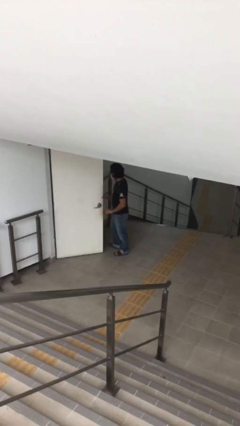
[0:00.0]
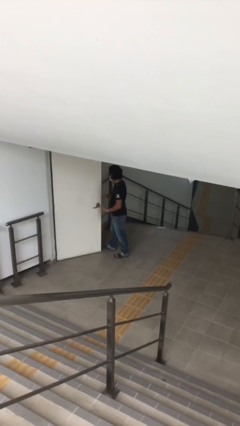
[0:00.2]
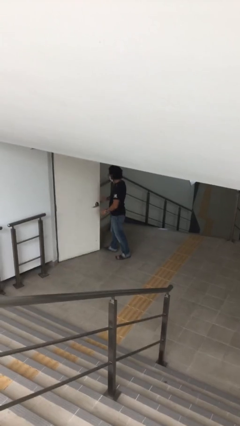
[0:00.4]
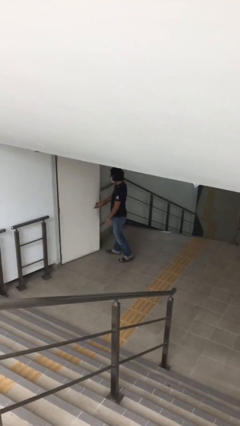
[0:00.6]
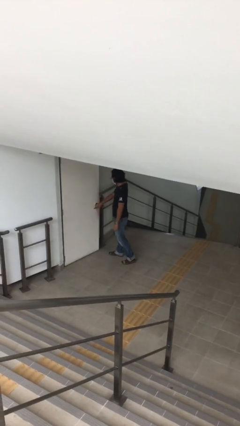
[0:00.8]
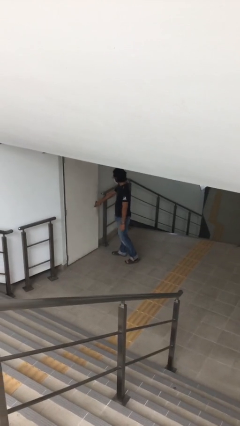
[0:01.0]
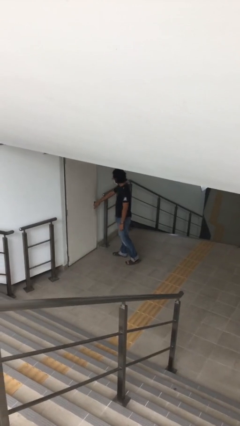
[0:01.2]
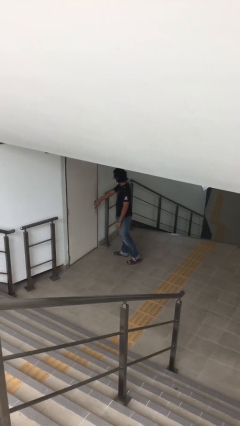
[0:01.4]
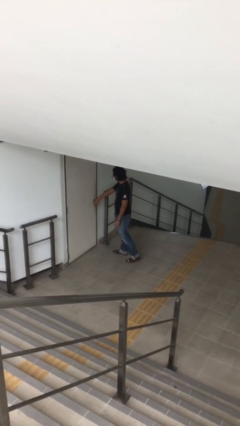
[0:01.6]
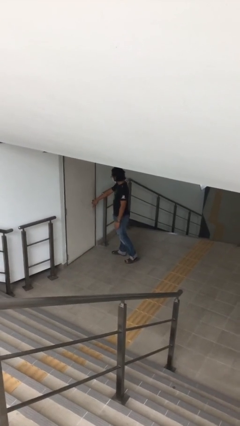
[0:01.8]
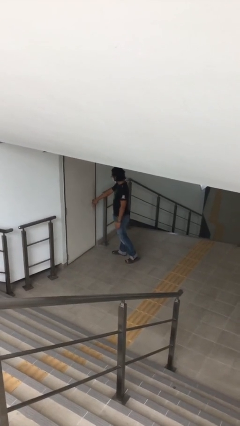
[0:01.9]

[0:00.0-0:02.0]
person closes facility door

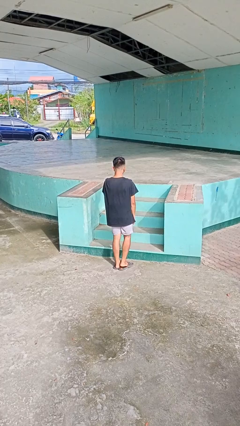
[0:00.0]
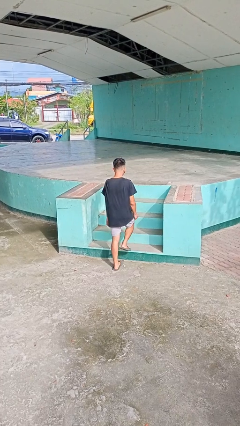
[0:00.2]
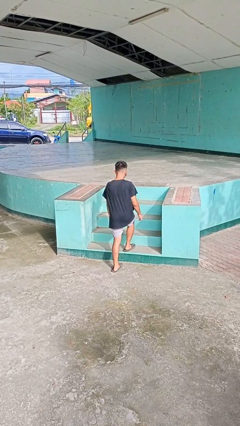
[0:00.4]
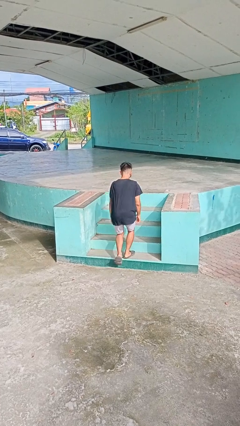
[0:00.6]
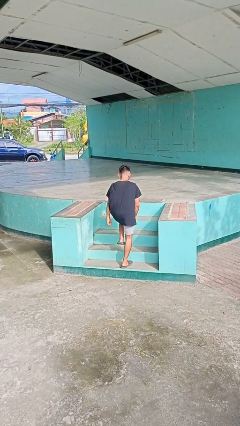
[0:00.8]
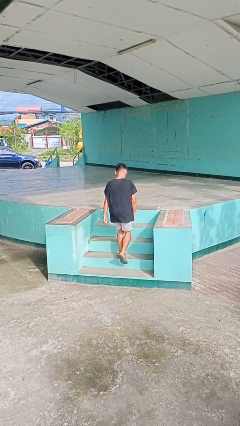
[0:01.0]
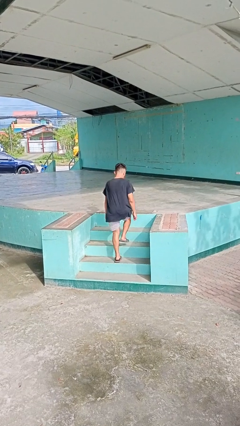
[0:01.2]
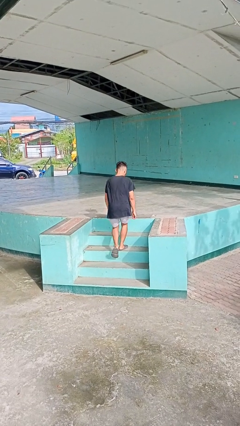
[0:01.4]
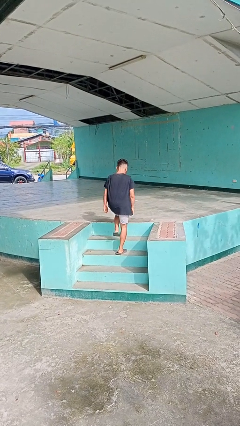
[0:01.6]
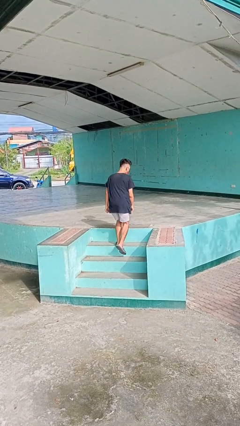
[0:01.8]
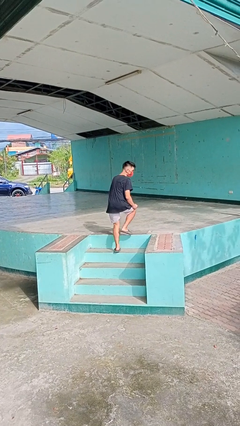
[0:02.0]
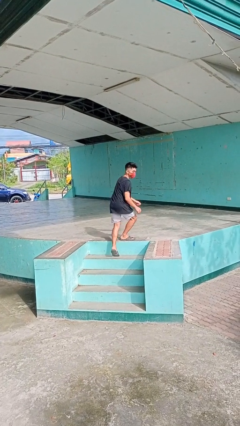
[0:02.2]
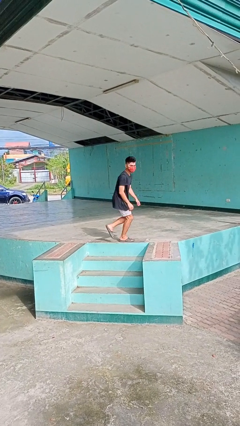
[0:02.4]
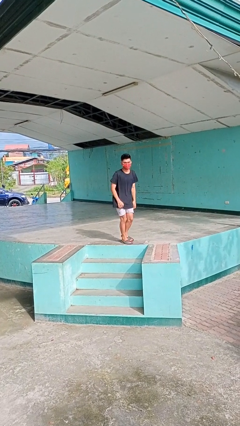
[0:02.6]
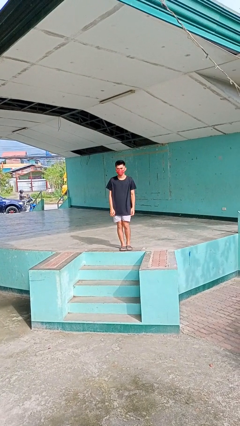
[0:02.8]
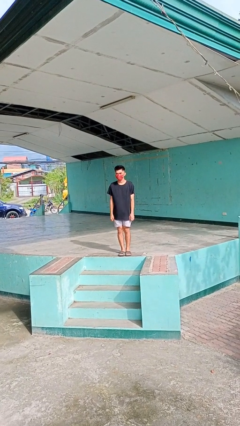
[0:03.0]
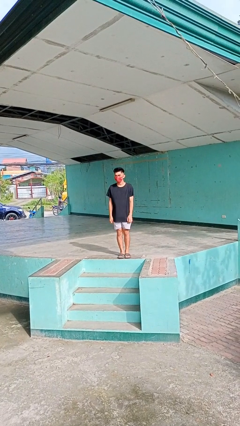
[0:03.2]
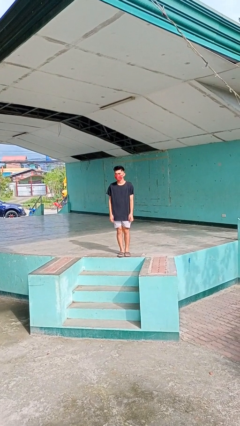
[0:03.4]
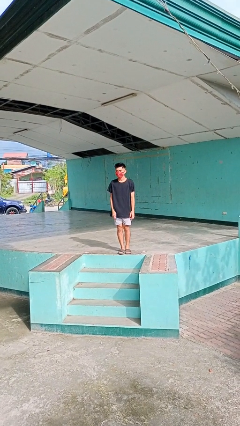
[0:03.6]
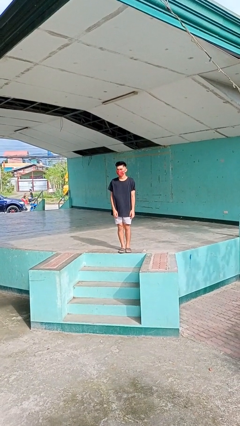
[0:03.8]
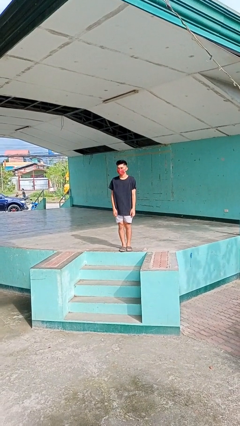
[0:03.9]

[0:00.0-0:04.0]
person climbs up stairs

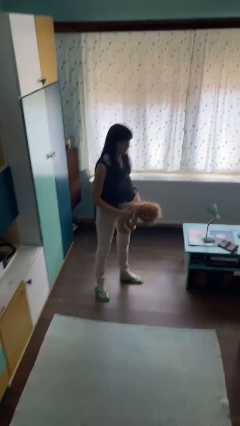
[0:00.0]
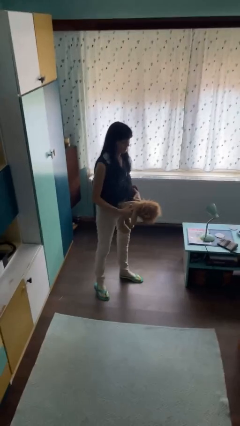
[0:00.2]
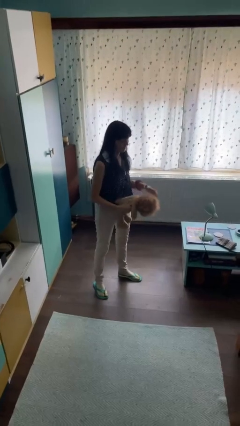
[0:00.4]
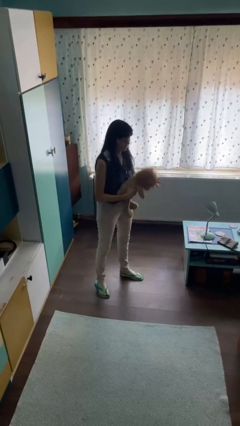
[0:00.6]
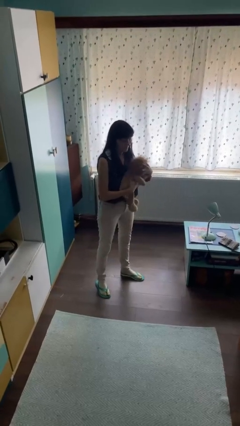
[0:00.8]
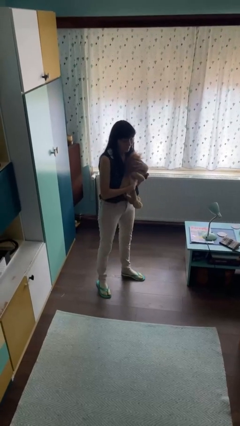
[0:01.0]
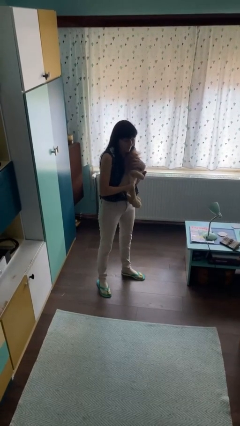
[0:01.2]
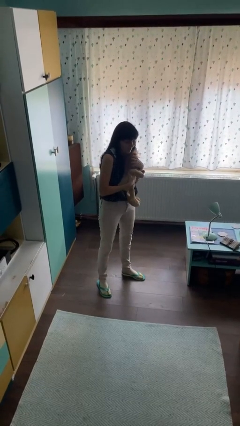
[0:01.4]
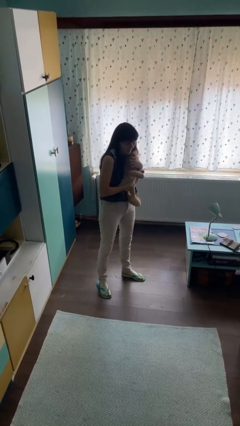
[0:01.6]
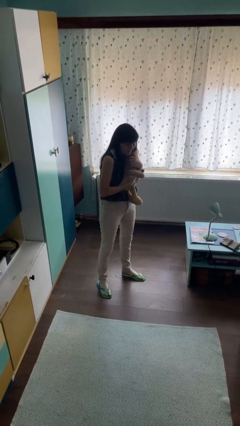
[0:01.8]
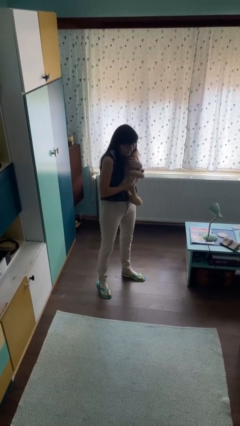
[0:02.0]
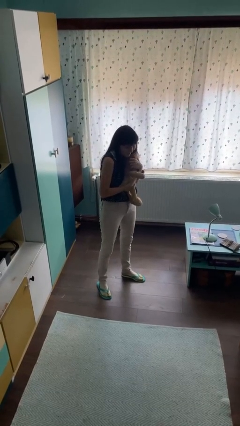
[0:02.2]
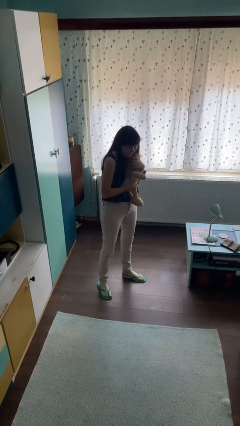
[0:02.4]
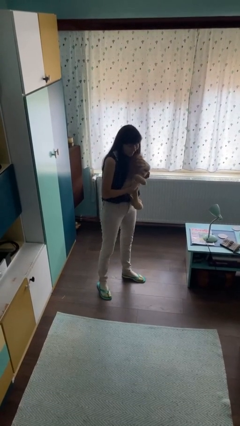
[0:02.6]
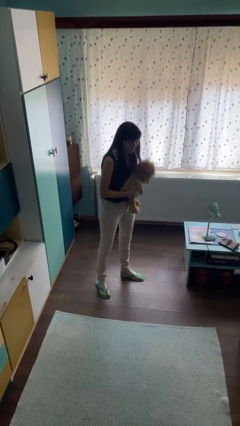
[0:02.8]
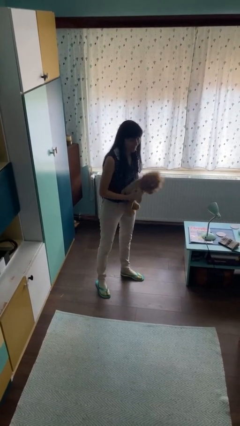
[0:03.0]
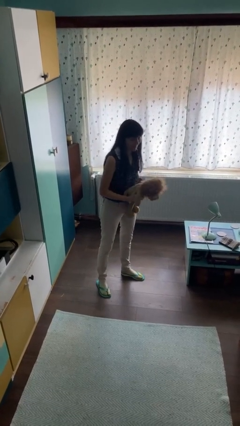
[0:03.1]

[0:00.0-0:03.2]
person squeezes object

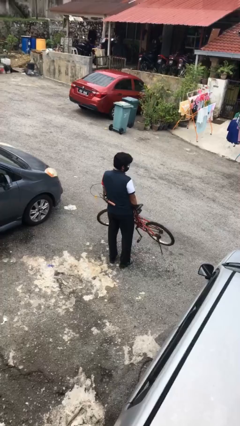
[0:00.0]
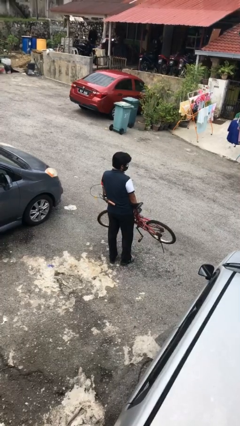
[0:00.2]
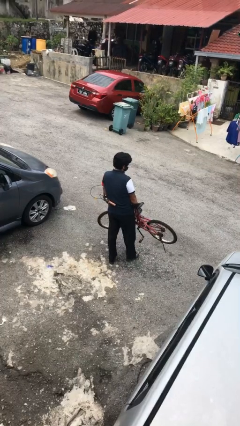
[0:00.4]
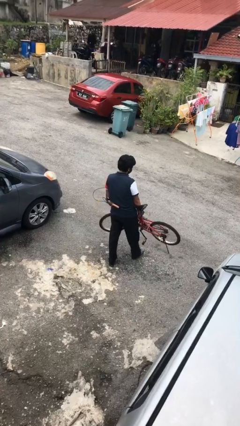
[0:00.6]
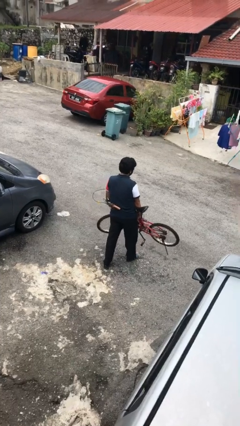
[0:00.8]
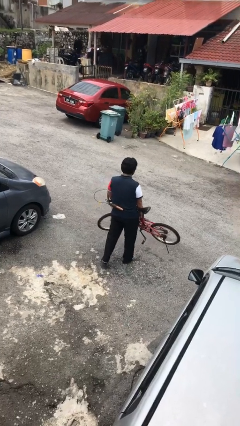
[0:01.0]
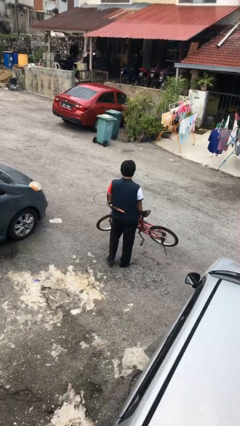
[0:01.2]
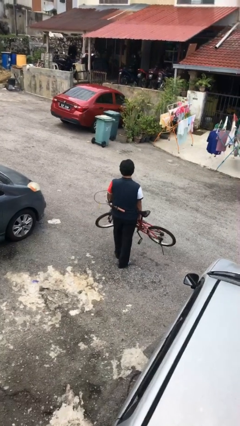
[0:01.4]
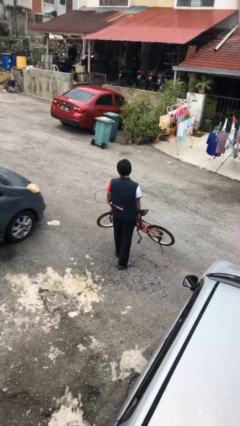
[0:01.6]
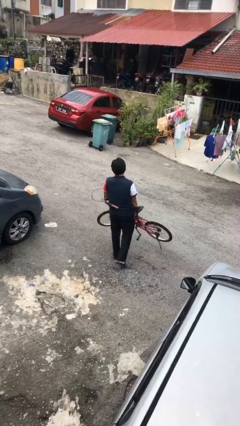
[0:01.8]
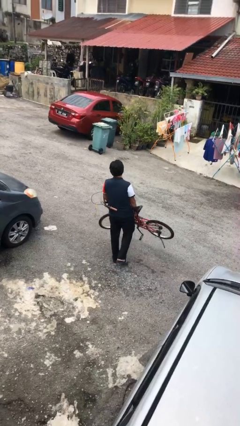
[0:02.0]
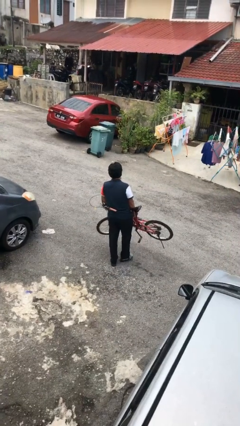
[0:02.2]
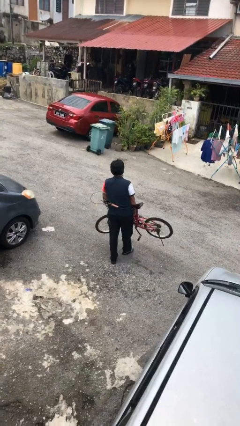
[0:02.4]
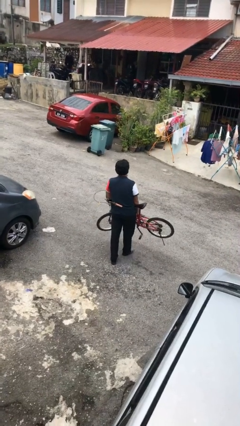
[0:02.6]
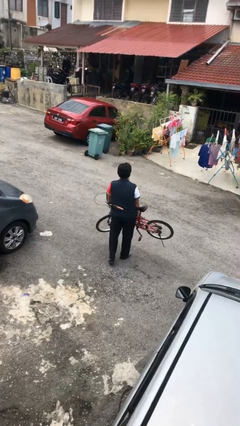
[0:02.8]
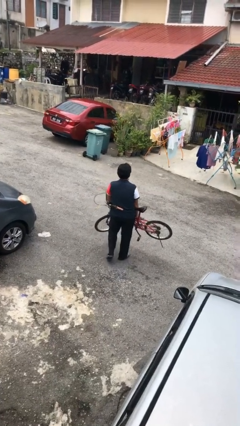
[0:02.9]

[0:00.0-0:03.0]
person carries bicycle

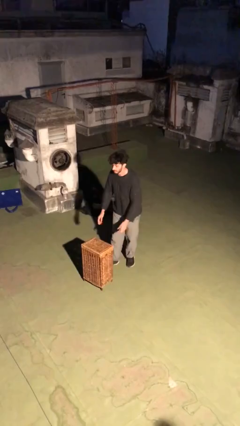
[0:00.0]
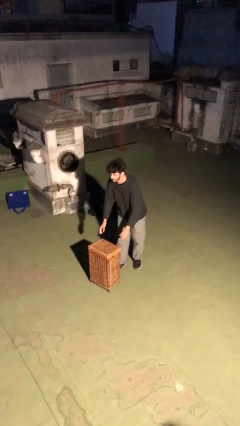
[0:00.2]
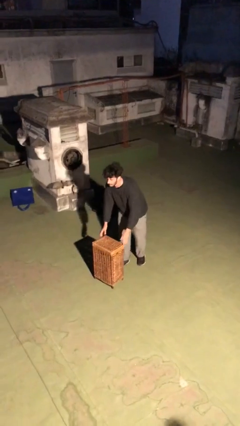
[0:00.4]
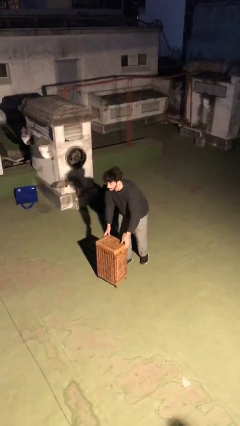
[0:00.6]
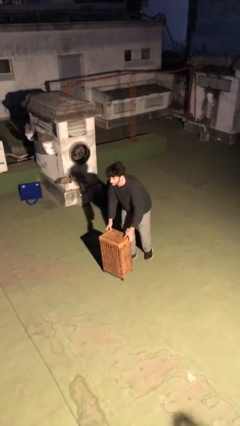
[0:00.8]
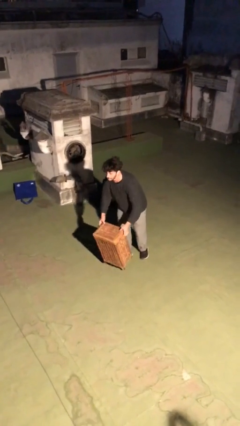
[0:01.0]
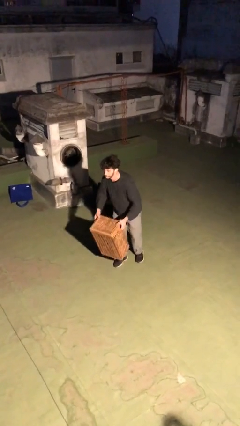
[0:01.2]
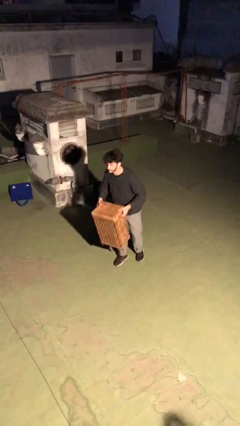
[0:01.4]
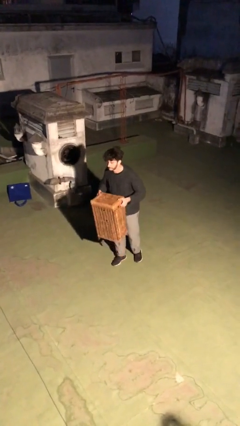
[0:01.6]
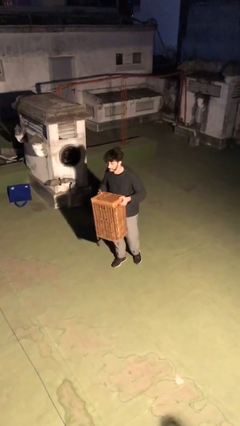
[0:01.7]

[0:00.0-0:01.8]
person picks up object from floor

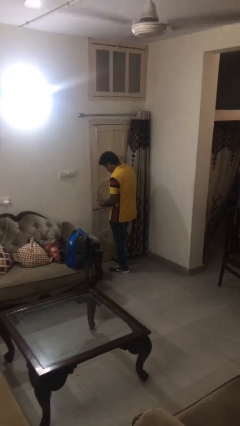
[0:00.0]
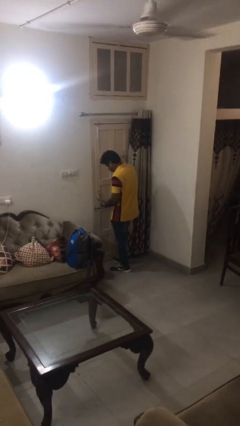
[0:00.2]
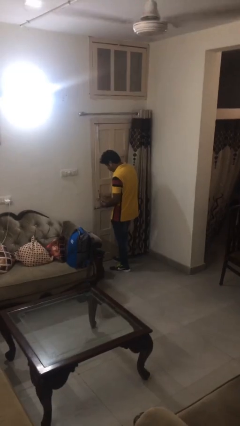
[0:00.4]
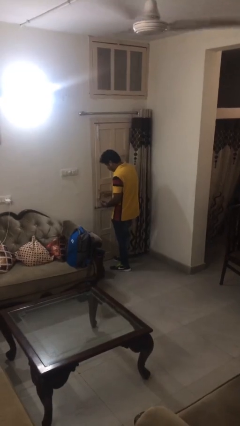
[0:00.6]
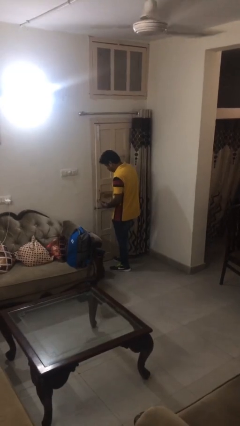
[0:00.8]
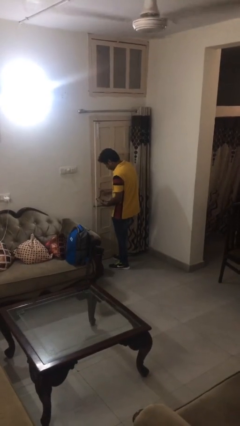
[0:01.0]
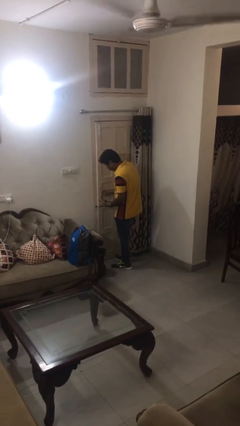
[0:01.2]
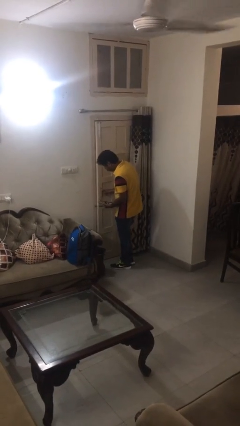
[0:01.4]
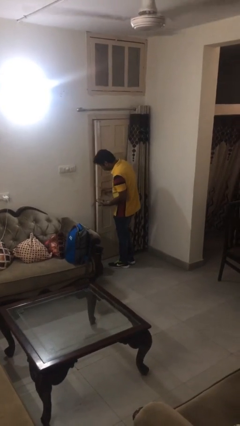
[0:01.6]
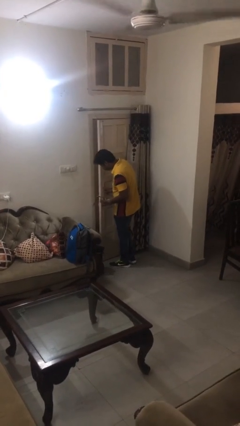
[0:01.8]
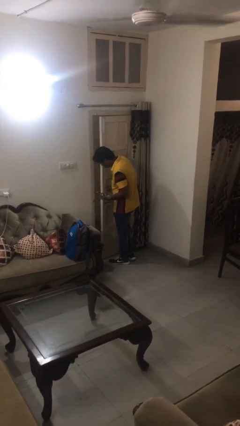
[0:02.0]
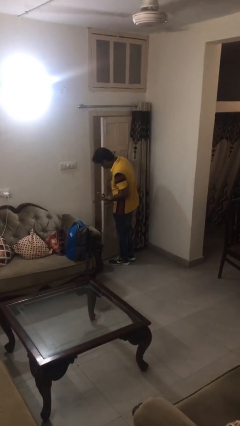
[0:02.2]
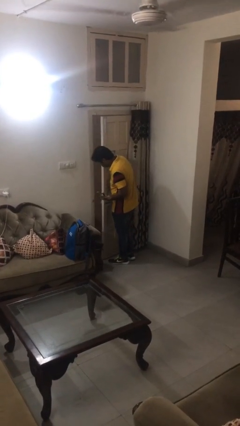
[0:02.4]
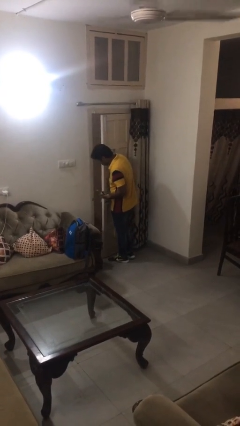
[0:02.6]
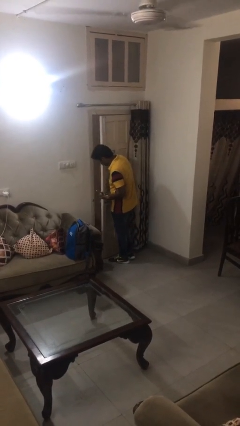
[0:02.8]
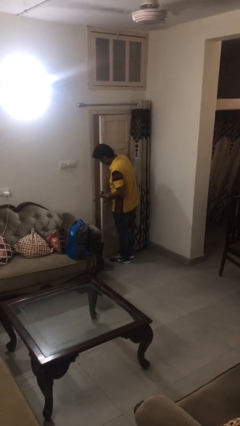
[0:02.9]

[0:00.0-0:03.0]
person opens facility door

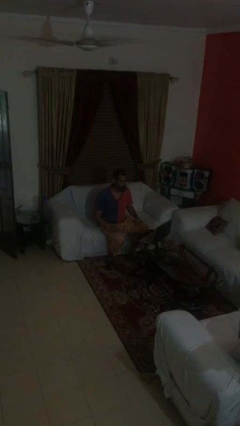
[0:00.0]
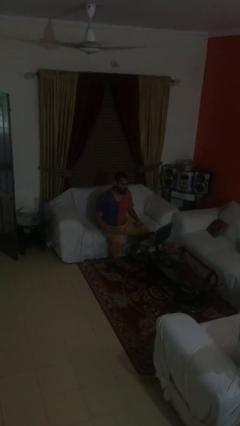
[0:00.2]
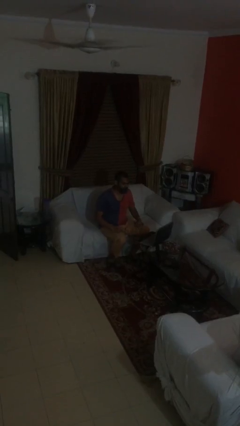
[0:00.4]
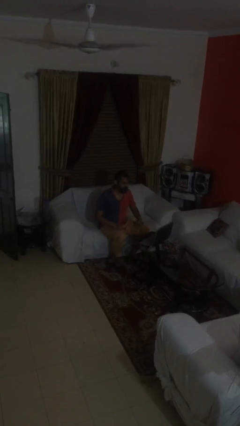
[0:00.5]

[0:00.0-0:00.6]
person interacts with laptop
